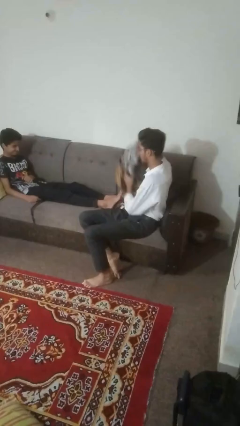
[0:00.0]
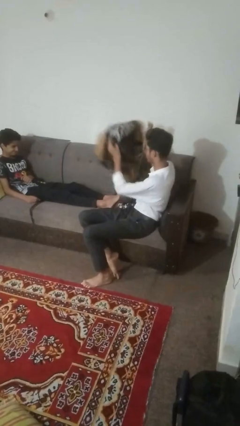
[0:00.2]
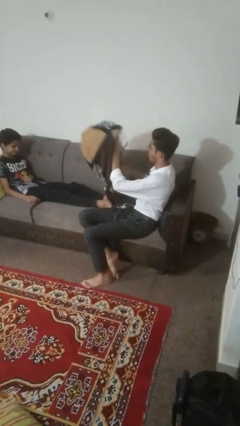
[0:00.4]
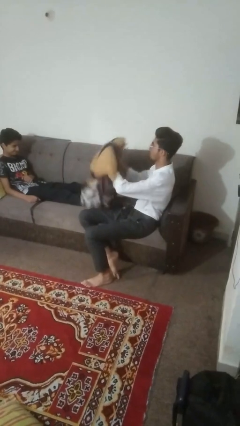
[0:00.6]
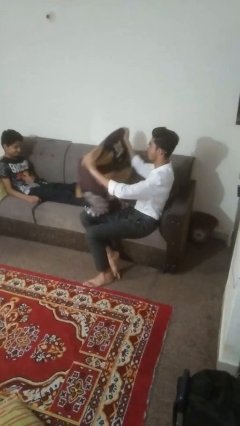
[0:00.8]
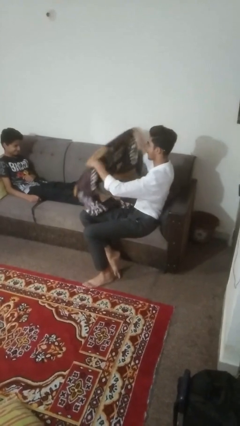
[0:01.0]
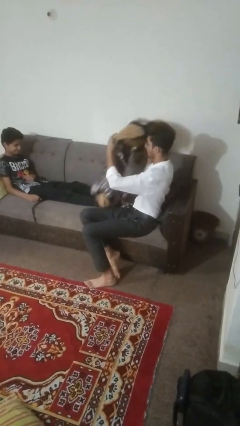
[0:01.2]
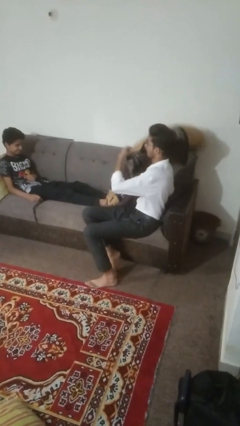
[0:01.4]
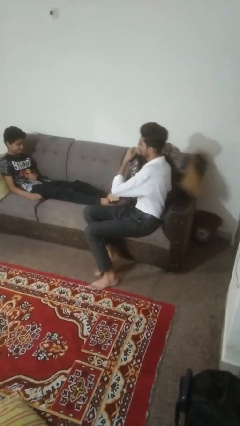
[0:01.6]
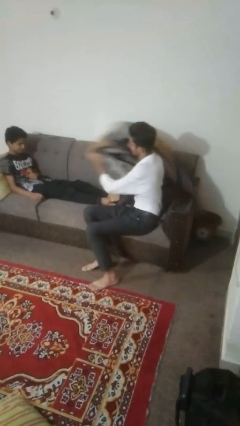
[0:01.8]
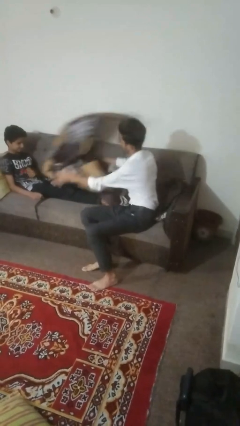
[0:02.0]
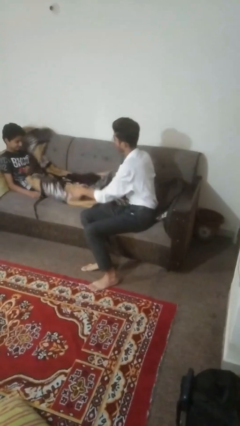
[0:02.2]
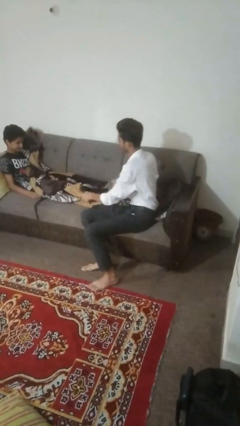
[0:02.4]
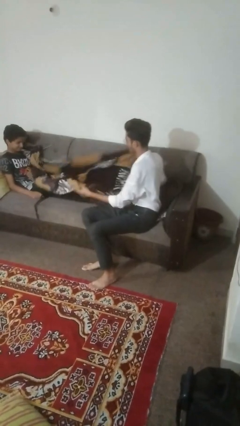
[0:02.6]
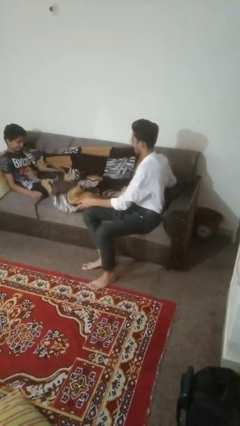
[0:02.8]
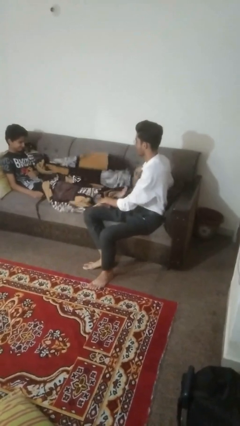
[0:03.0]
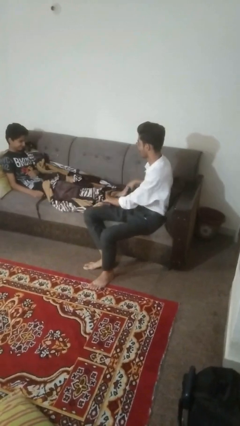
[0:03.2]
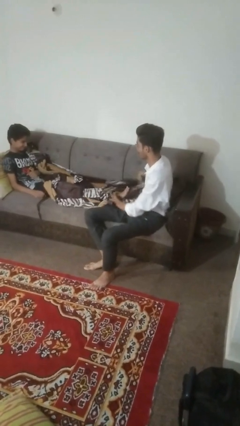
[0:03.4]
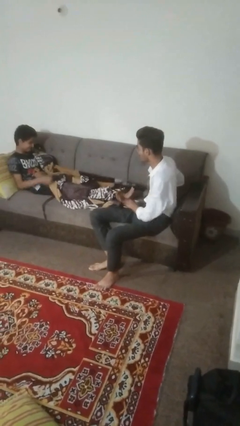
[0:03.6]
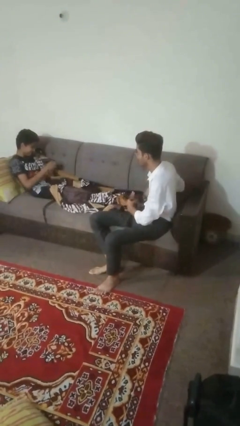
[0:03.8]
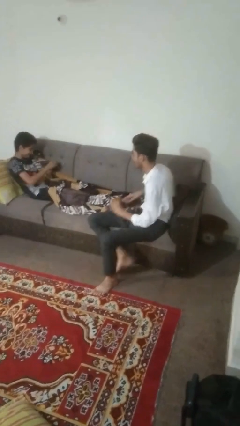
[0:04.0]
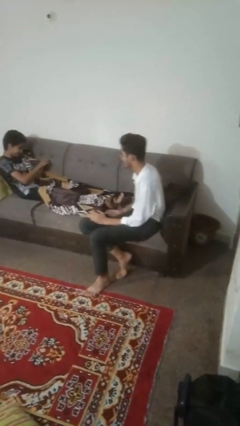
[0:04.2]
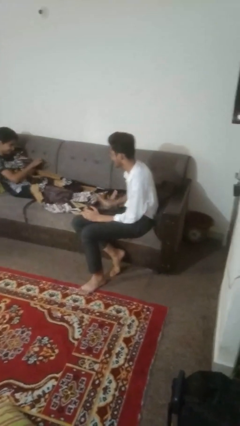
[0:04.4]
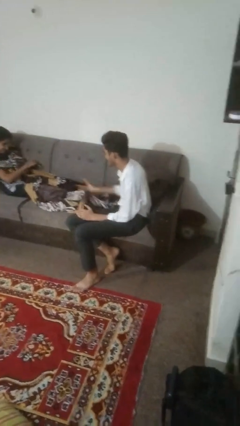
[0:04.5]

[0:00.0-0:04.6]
person covers friend with blanket

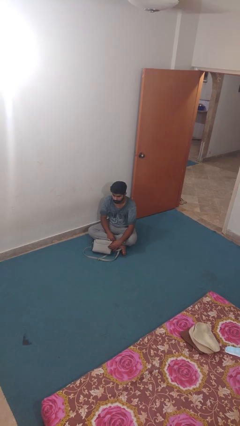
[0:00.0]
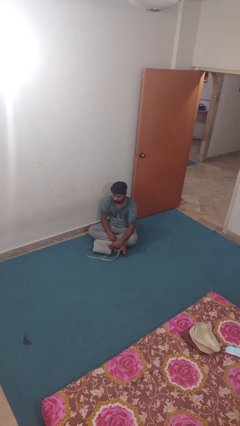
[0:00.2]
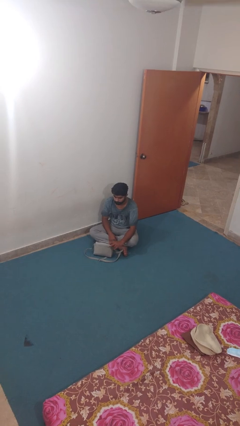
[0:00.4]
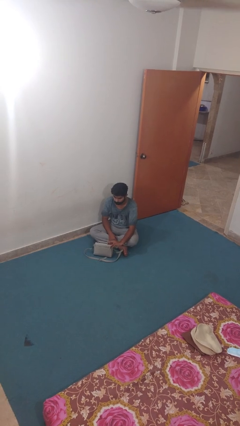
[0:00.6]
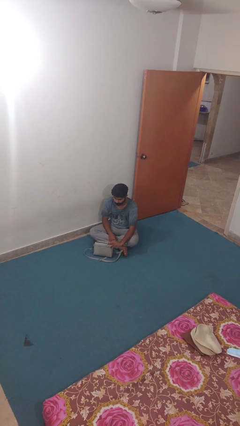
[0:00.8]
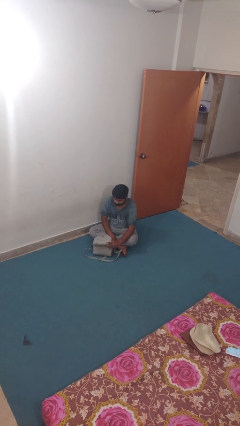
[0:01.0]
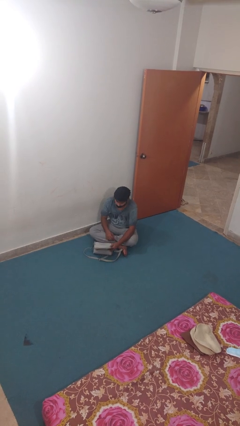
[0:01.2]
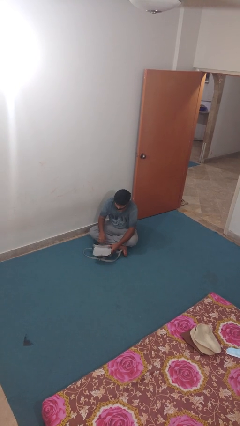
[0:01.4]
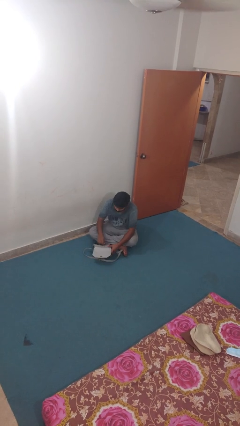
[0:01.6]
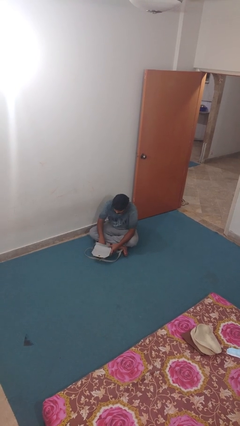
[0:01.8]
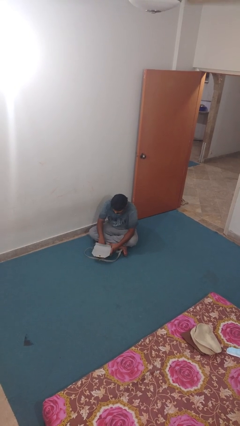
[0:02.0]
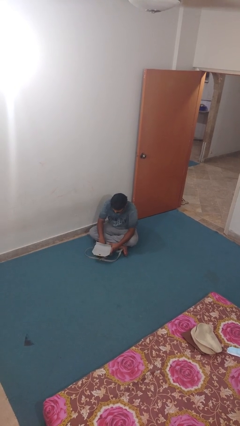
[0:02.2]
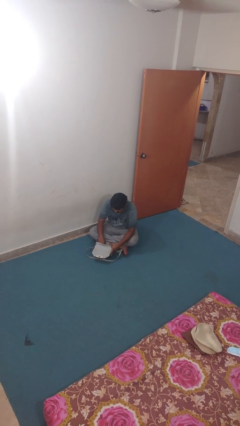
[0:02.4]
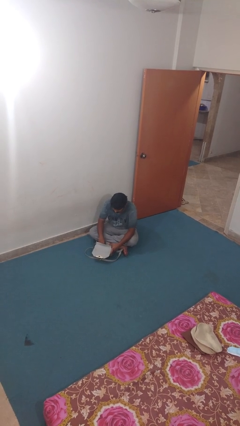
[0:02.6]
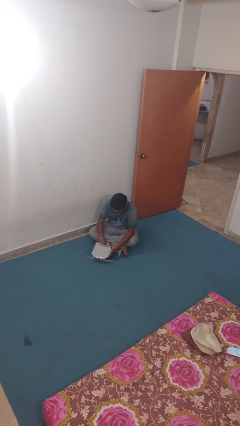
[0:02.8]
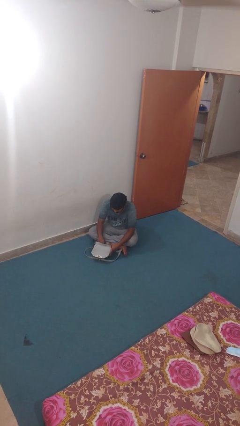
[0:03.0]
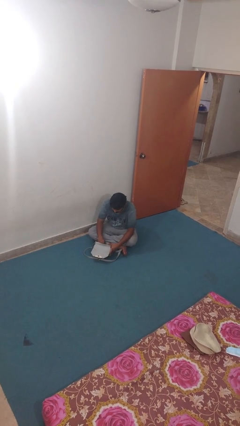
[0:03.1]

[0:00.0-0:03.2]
person searches in purse

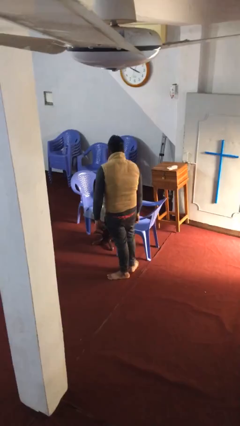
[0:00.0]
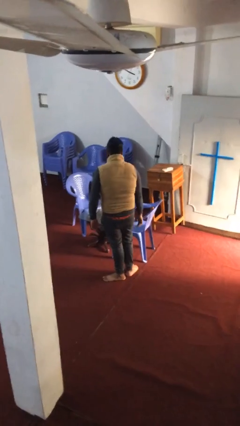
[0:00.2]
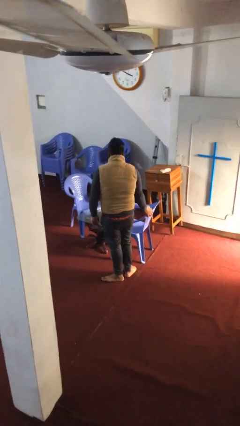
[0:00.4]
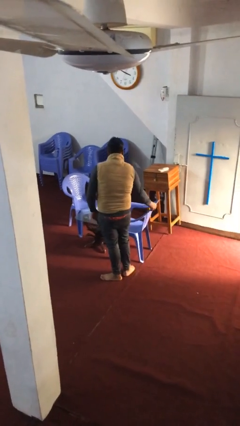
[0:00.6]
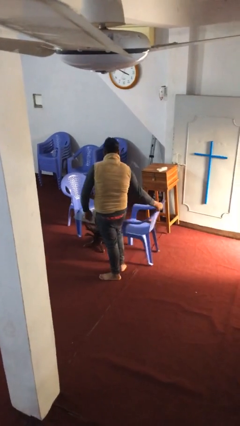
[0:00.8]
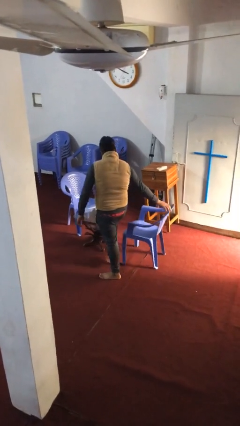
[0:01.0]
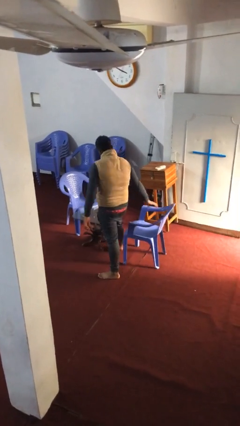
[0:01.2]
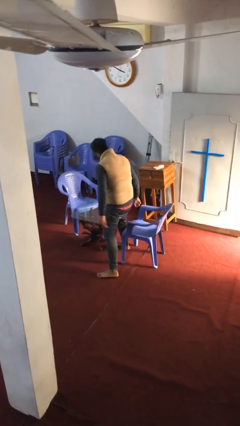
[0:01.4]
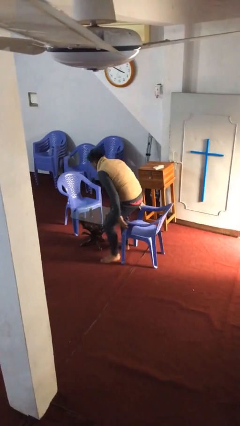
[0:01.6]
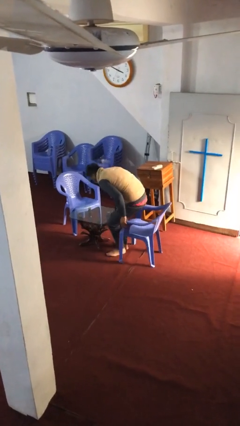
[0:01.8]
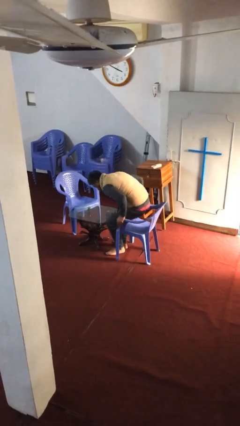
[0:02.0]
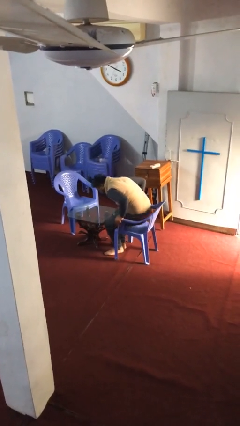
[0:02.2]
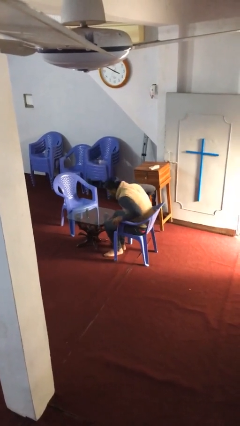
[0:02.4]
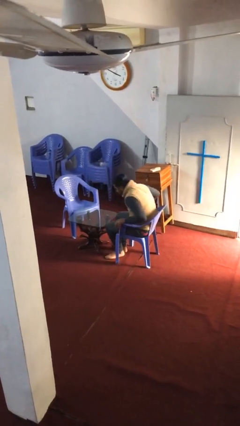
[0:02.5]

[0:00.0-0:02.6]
person sits down

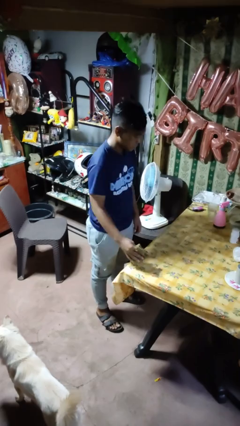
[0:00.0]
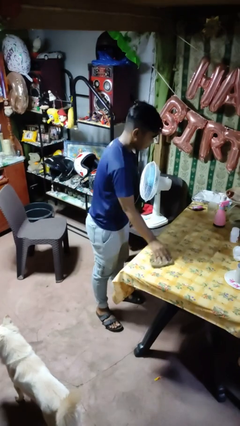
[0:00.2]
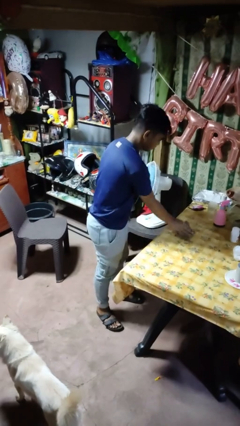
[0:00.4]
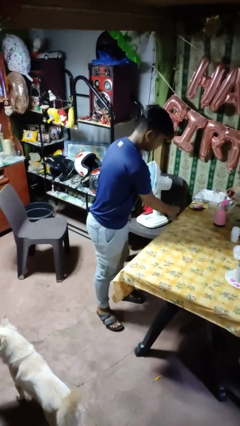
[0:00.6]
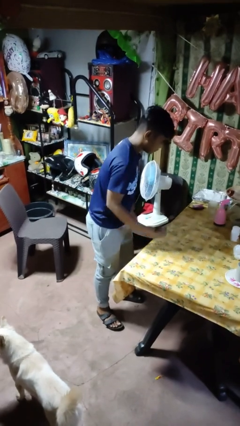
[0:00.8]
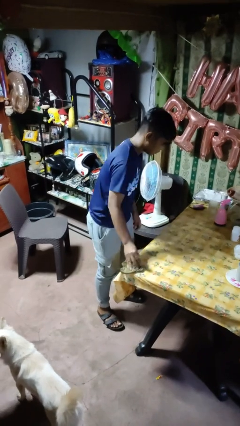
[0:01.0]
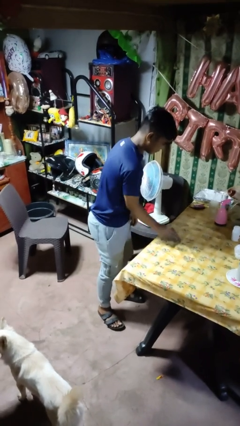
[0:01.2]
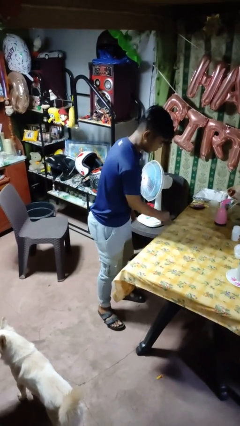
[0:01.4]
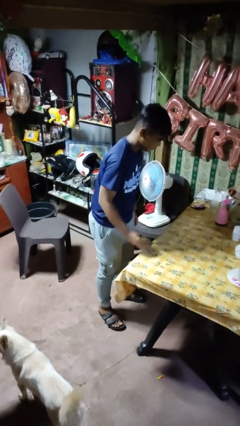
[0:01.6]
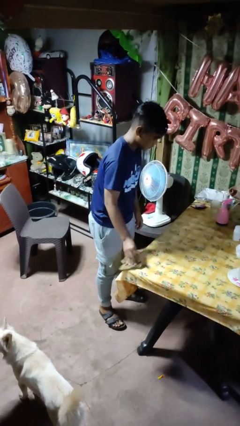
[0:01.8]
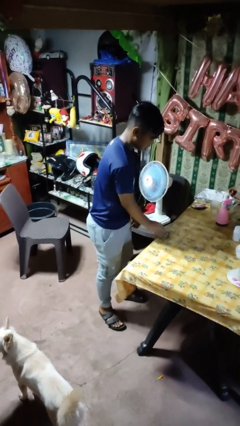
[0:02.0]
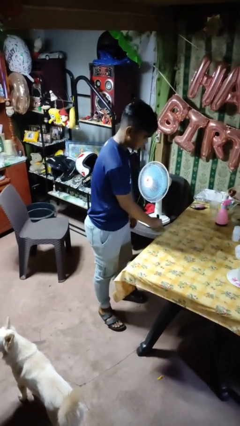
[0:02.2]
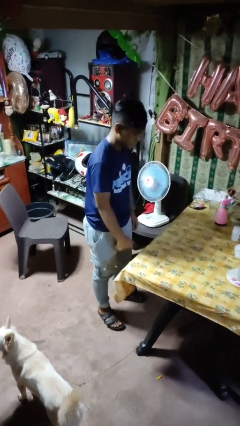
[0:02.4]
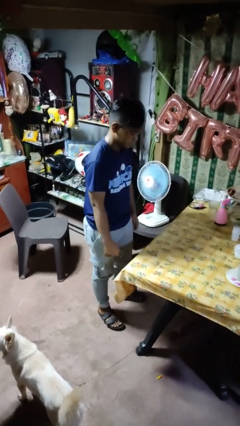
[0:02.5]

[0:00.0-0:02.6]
person cleans table with rag

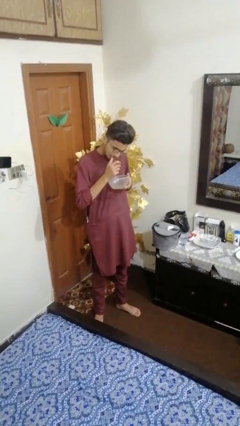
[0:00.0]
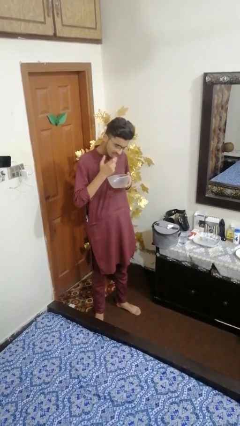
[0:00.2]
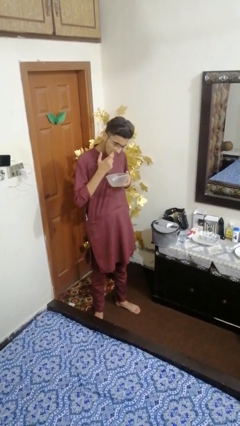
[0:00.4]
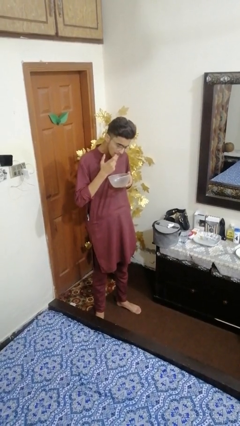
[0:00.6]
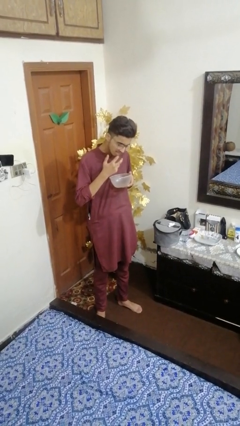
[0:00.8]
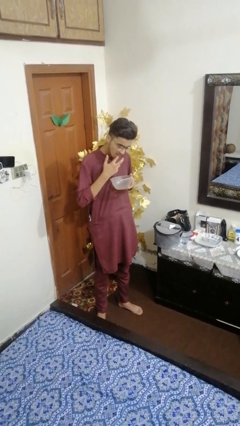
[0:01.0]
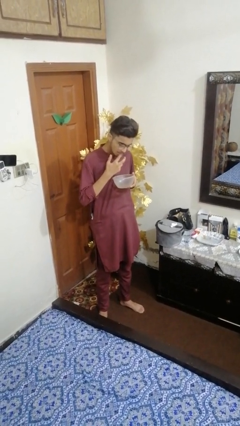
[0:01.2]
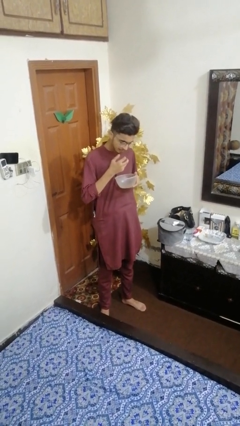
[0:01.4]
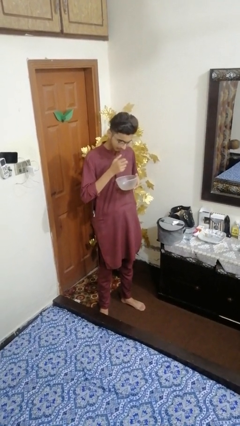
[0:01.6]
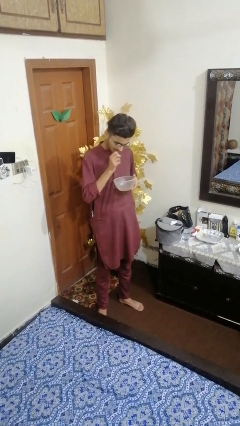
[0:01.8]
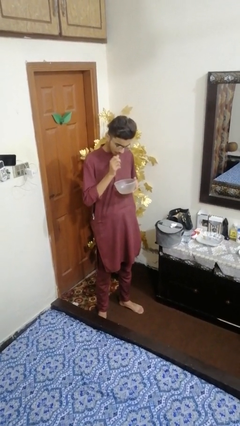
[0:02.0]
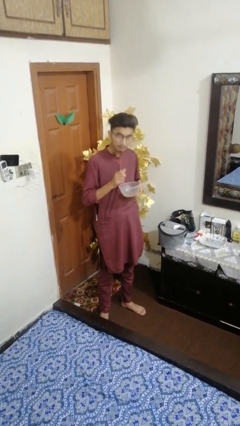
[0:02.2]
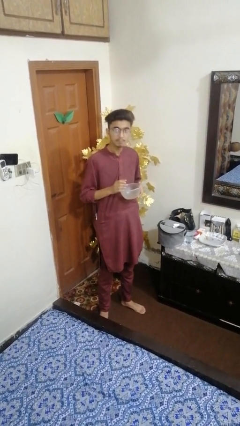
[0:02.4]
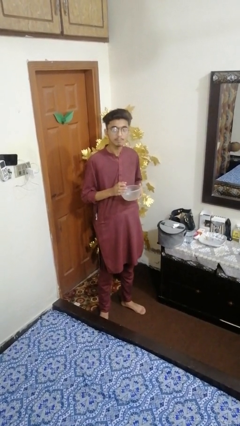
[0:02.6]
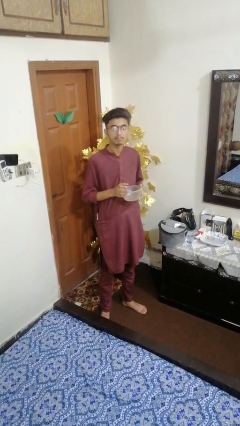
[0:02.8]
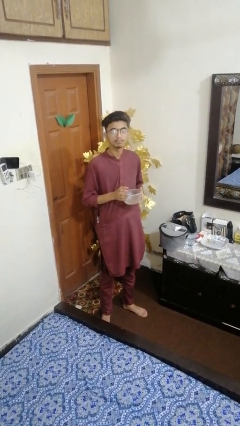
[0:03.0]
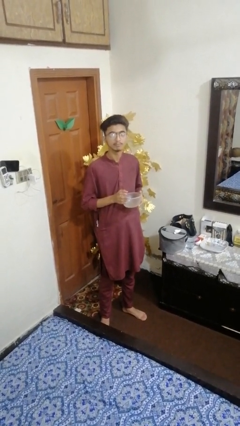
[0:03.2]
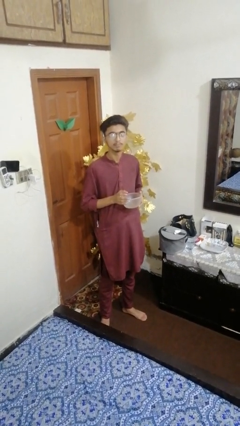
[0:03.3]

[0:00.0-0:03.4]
person licks fingers

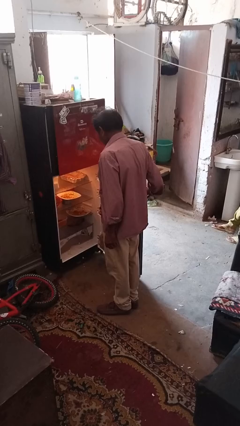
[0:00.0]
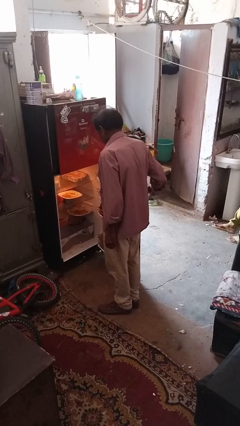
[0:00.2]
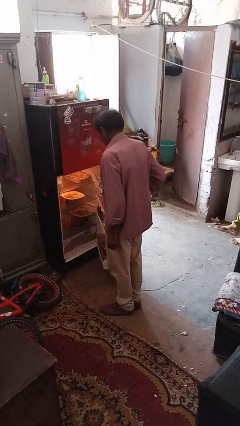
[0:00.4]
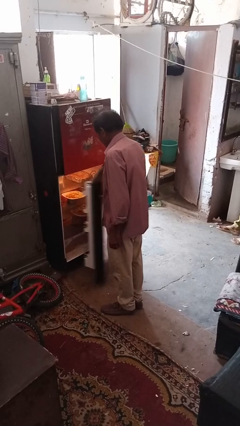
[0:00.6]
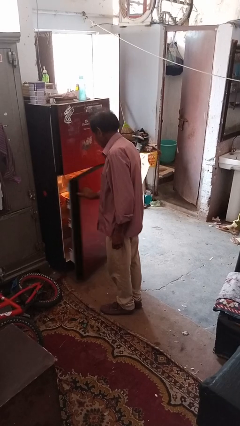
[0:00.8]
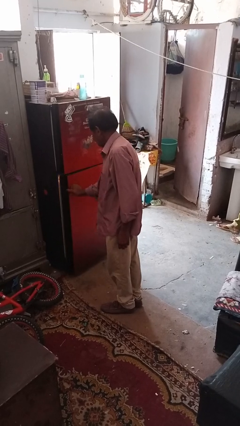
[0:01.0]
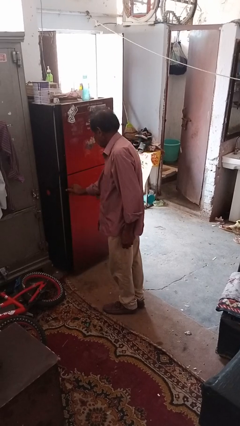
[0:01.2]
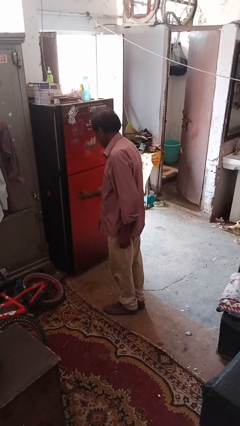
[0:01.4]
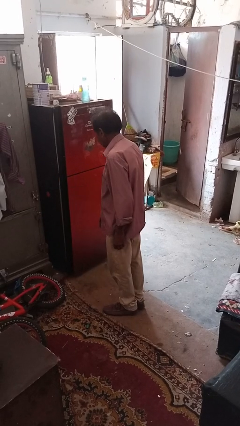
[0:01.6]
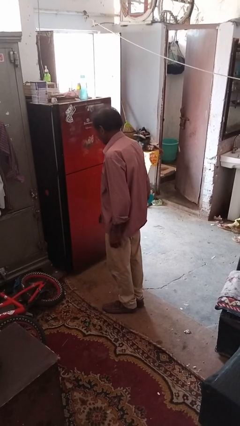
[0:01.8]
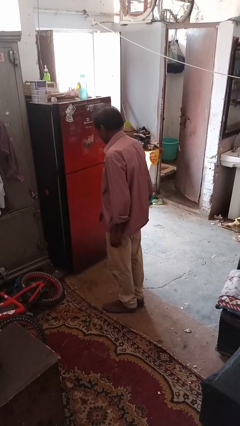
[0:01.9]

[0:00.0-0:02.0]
person closes refrigerator
